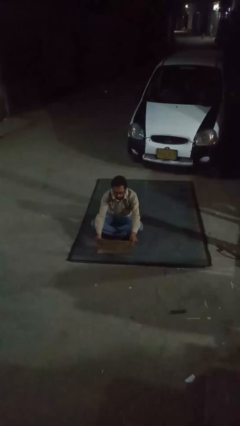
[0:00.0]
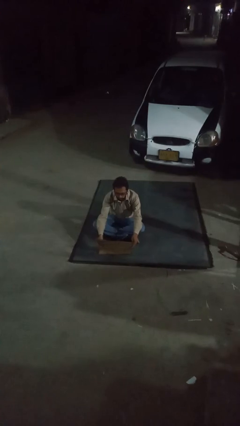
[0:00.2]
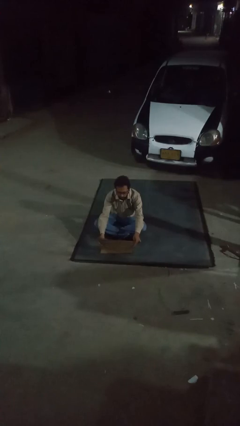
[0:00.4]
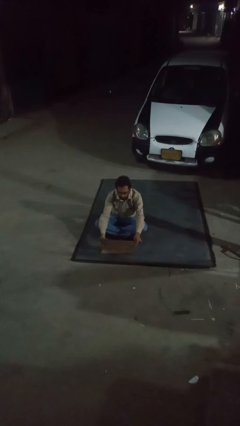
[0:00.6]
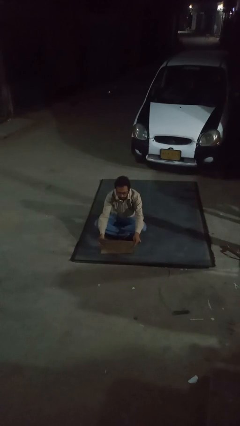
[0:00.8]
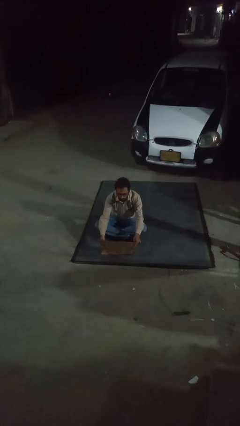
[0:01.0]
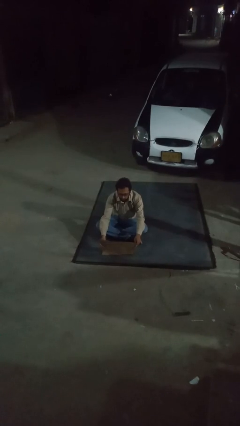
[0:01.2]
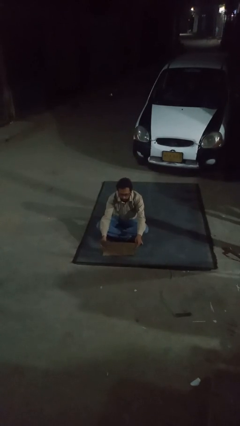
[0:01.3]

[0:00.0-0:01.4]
person opens laptop

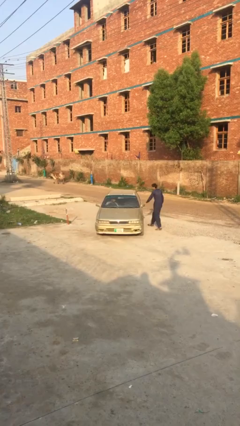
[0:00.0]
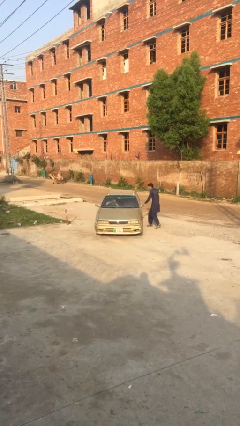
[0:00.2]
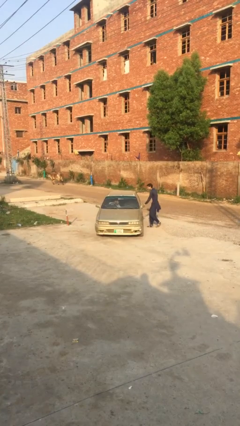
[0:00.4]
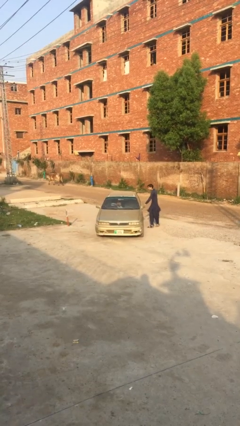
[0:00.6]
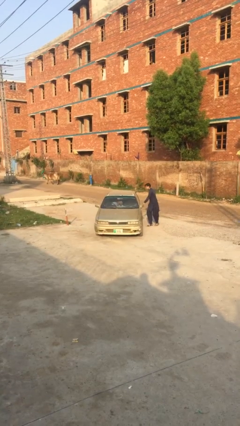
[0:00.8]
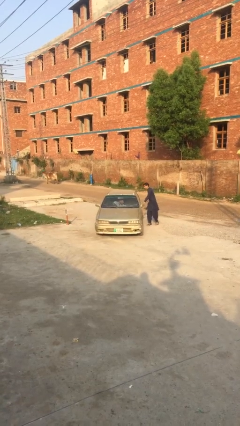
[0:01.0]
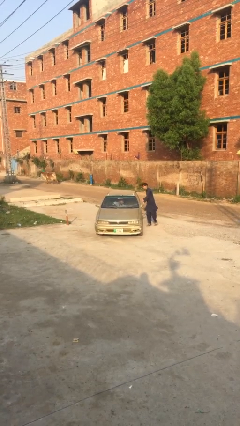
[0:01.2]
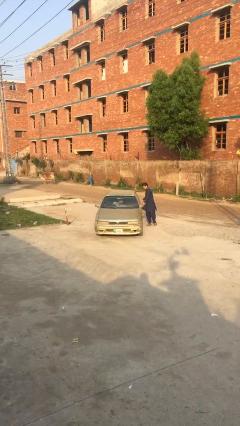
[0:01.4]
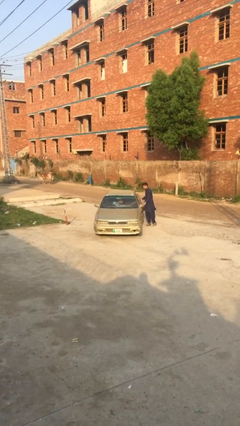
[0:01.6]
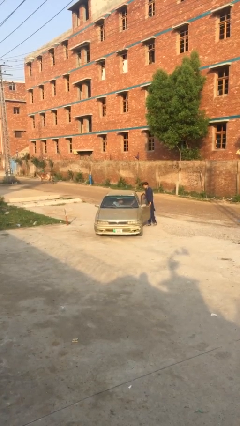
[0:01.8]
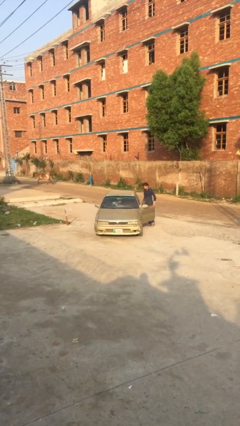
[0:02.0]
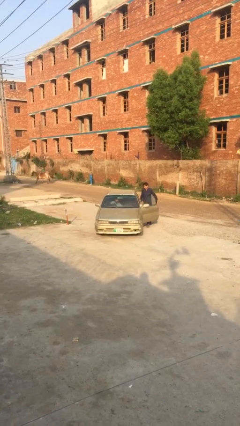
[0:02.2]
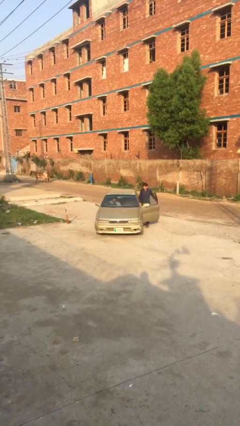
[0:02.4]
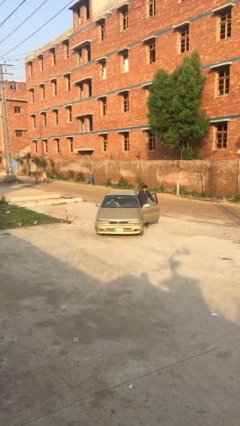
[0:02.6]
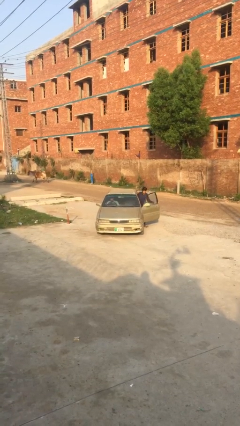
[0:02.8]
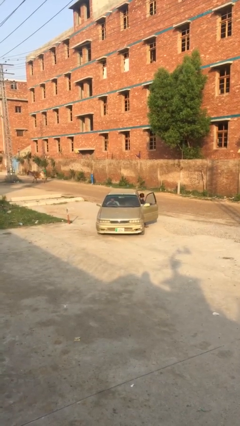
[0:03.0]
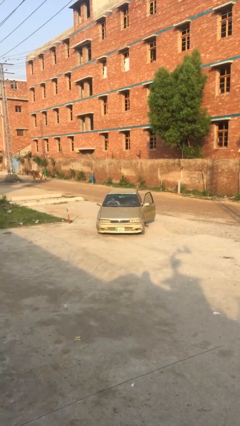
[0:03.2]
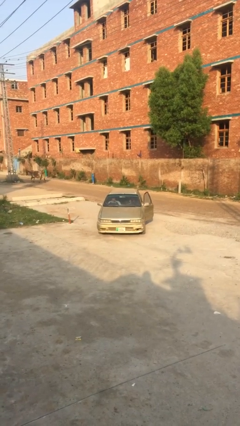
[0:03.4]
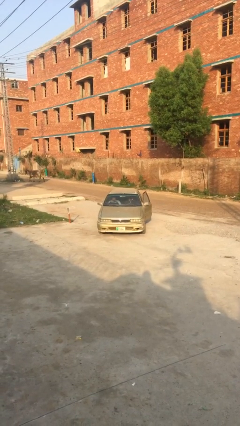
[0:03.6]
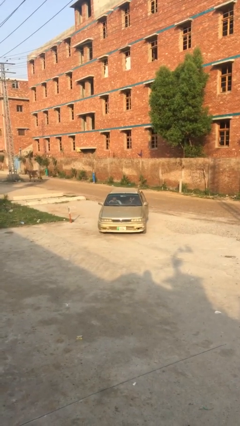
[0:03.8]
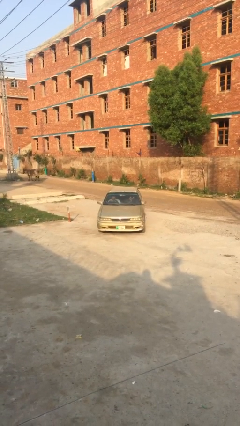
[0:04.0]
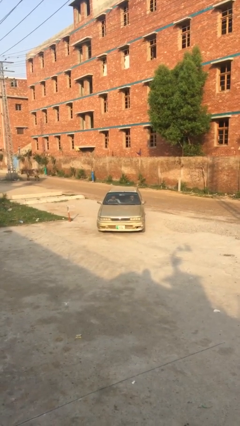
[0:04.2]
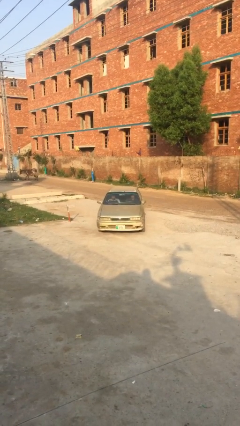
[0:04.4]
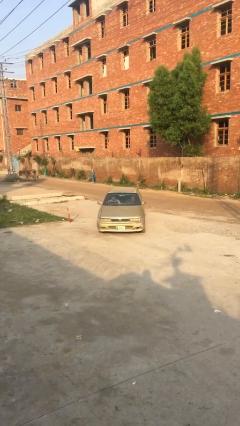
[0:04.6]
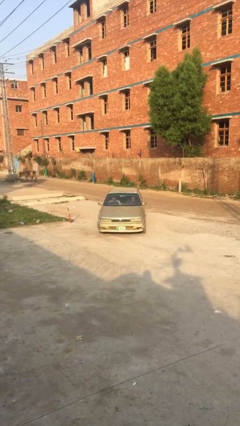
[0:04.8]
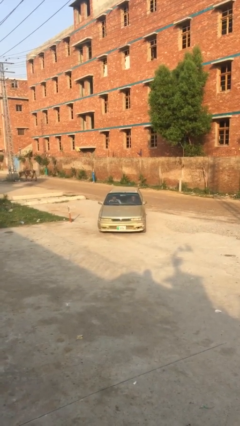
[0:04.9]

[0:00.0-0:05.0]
car picks up person

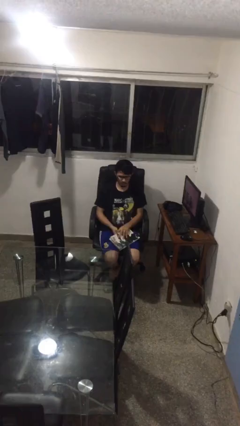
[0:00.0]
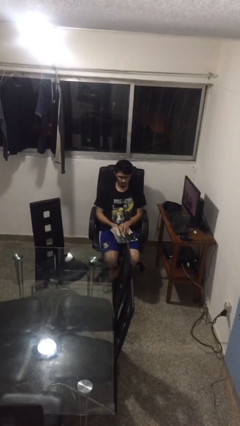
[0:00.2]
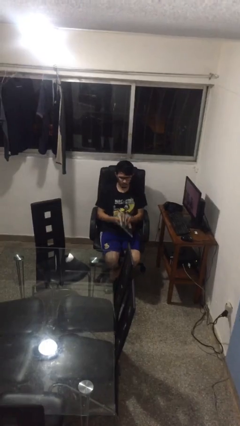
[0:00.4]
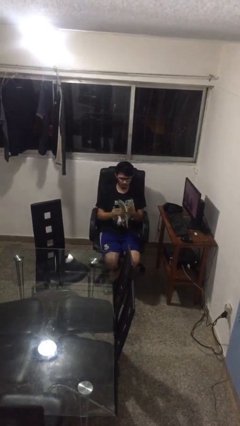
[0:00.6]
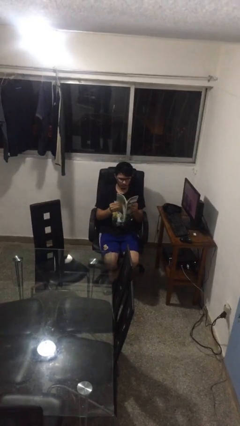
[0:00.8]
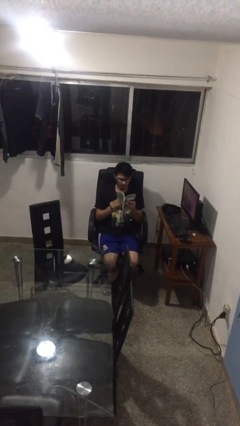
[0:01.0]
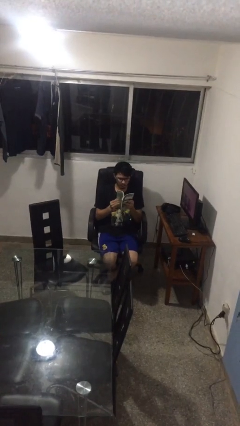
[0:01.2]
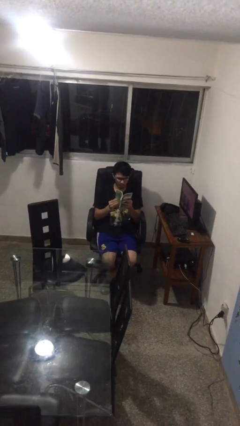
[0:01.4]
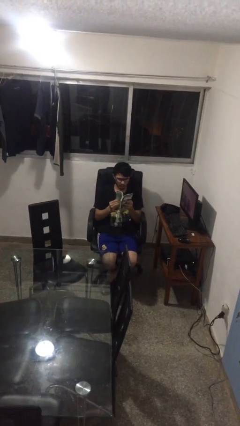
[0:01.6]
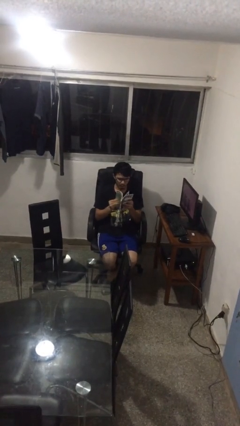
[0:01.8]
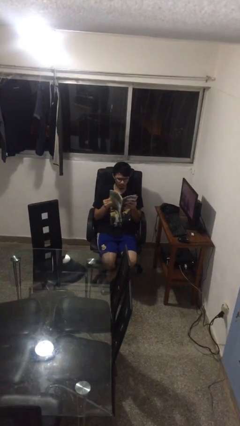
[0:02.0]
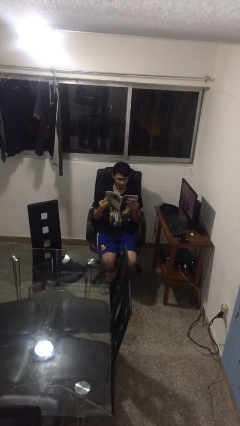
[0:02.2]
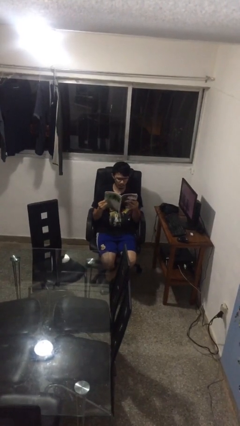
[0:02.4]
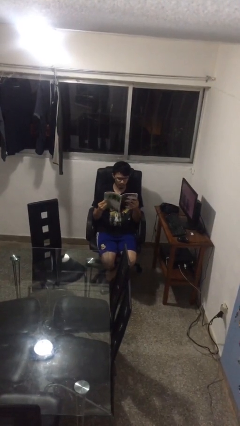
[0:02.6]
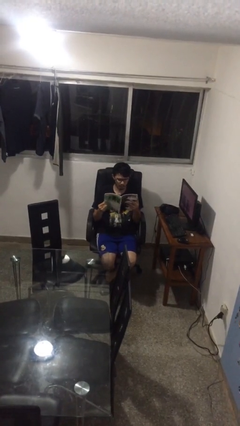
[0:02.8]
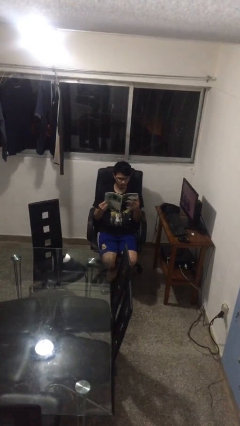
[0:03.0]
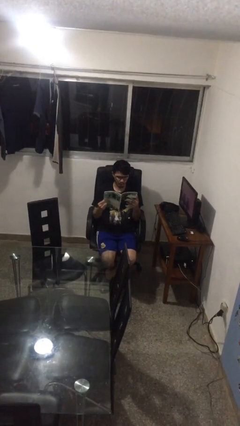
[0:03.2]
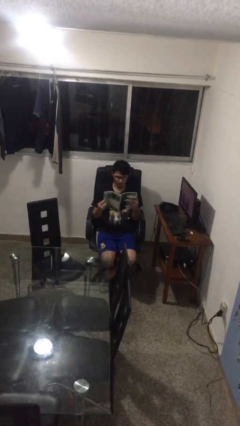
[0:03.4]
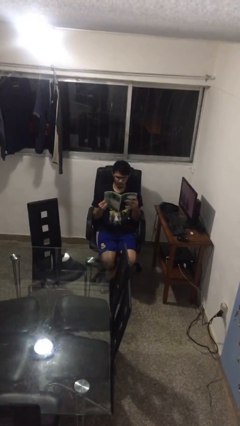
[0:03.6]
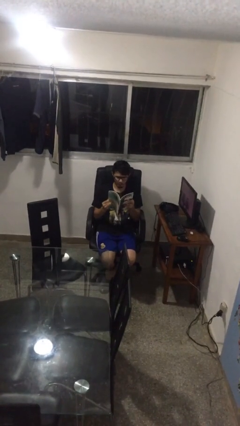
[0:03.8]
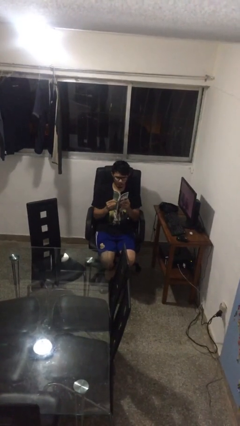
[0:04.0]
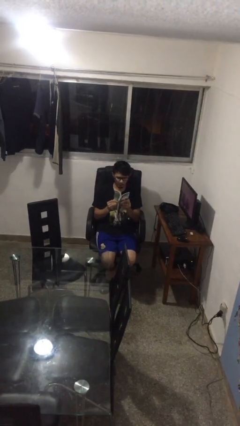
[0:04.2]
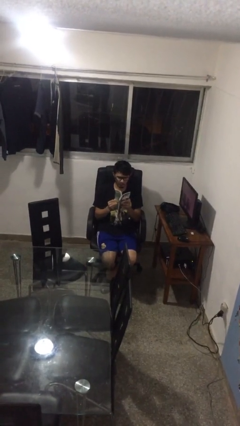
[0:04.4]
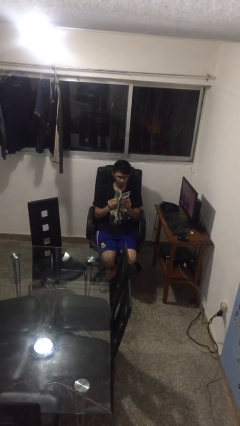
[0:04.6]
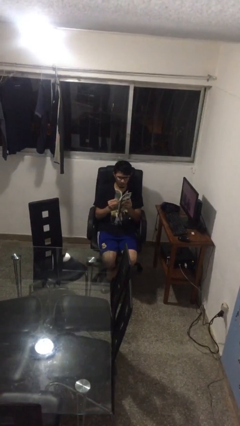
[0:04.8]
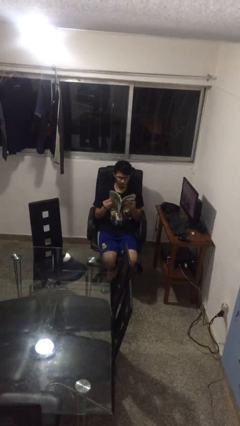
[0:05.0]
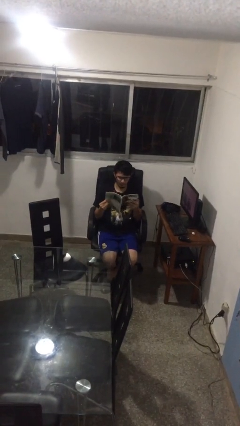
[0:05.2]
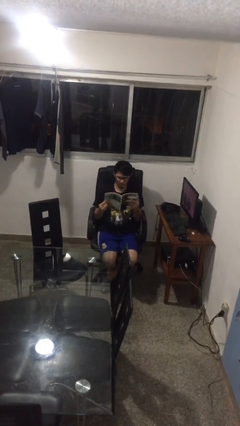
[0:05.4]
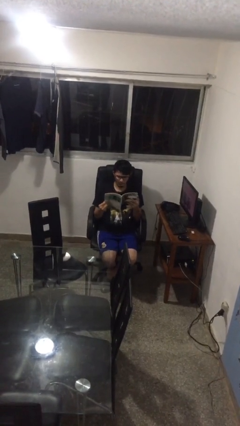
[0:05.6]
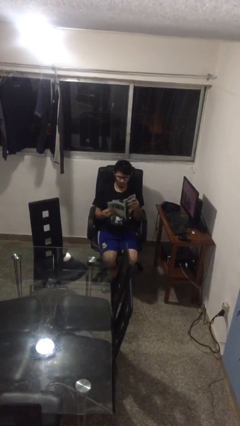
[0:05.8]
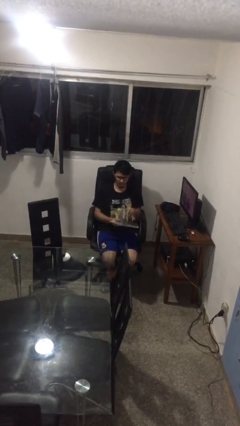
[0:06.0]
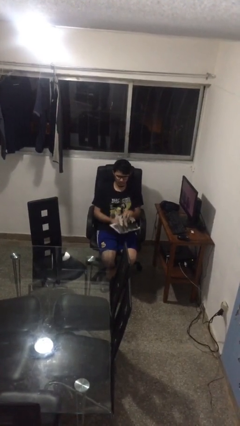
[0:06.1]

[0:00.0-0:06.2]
person reads magazine

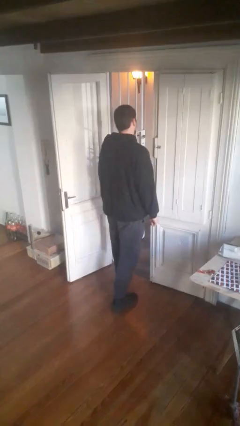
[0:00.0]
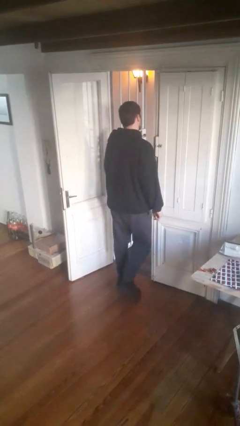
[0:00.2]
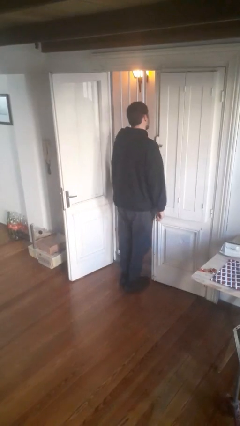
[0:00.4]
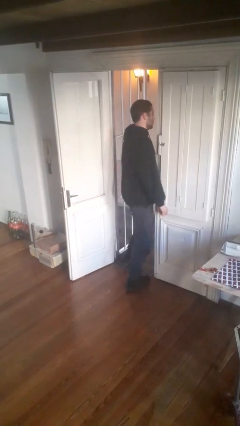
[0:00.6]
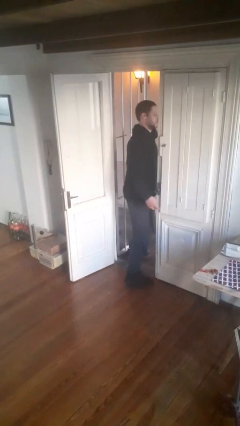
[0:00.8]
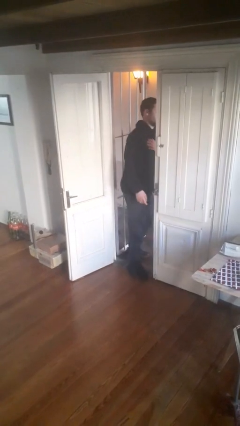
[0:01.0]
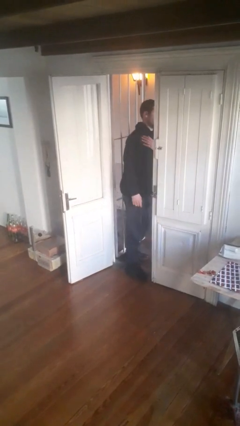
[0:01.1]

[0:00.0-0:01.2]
person bumps into wall

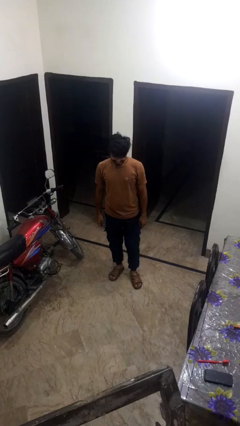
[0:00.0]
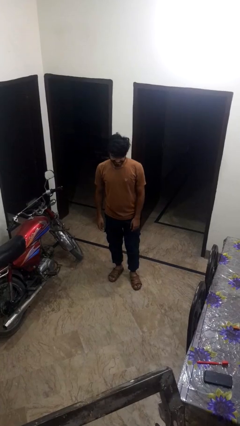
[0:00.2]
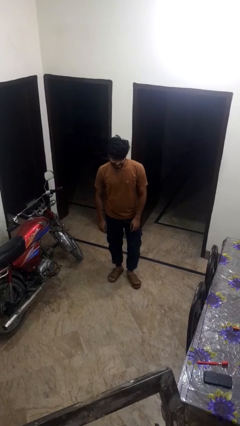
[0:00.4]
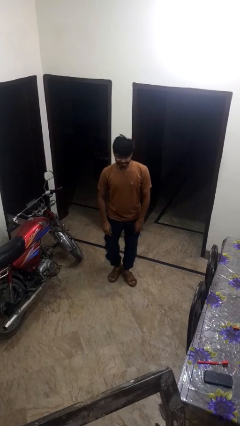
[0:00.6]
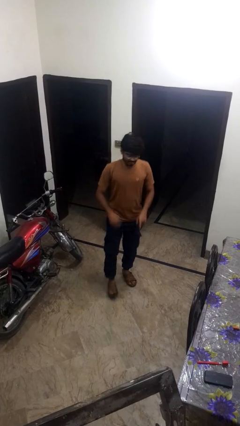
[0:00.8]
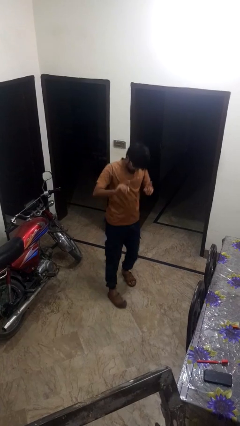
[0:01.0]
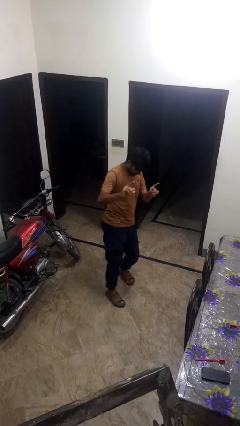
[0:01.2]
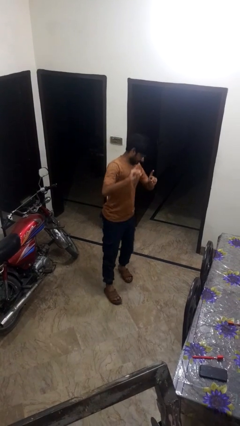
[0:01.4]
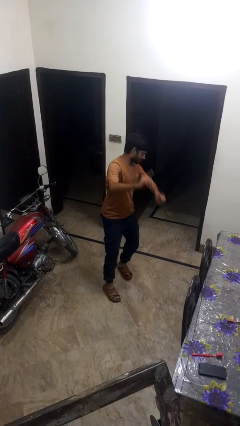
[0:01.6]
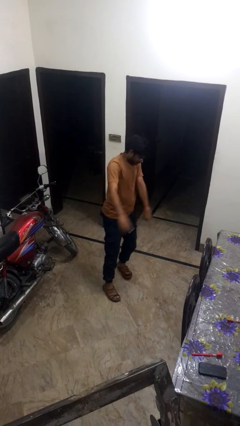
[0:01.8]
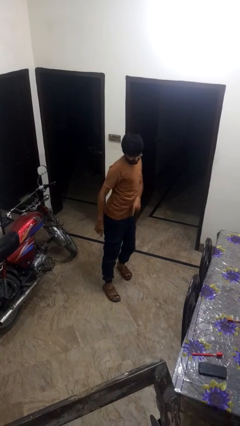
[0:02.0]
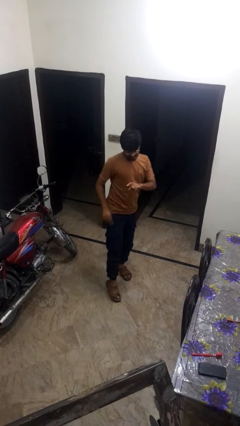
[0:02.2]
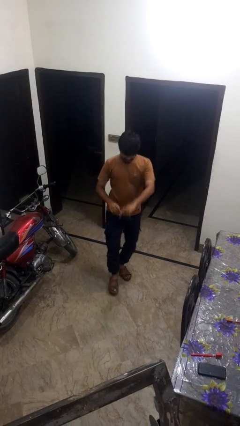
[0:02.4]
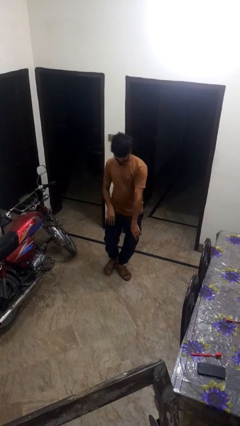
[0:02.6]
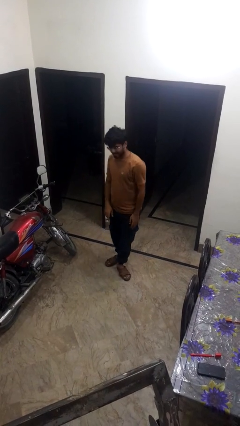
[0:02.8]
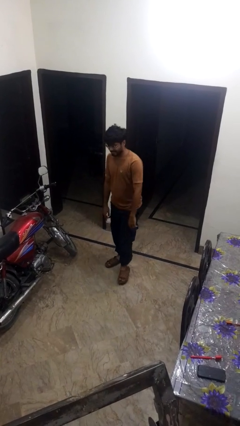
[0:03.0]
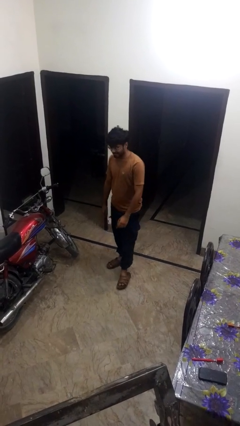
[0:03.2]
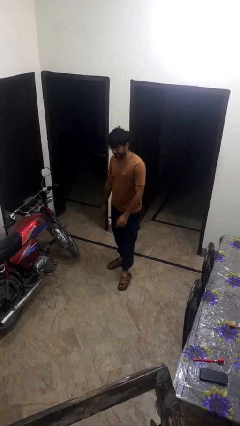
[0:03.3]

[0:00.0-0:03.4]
person dances in place

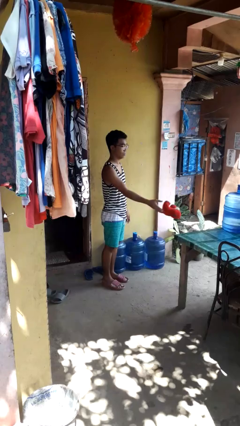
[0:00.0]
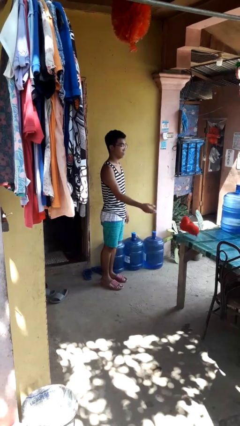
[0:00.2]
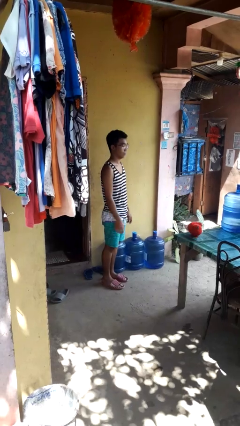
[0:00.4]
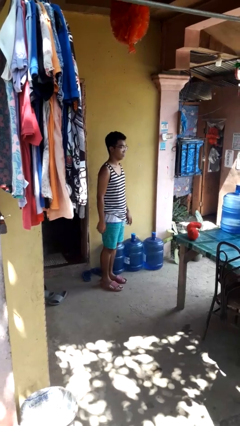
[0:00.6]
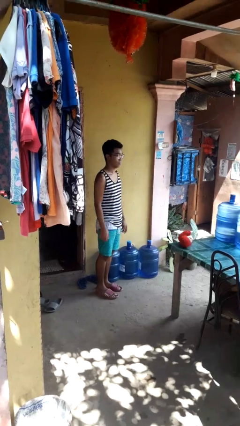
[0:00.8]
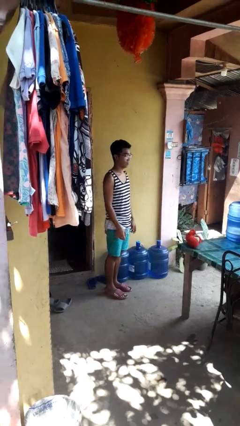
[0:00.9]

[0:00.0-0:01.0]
person throws object on table
